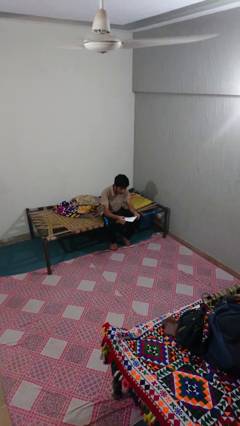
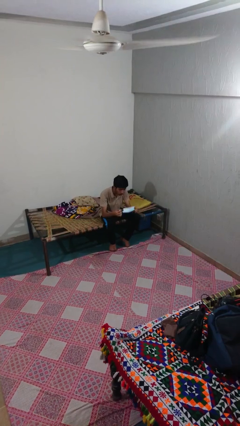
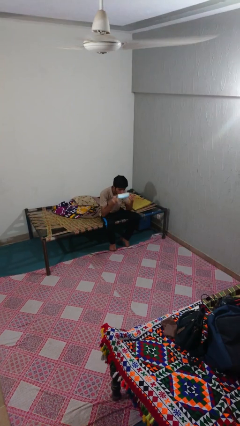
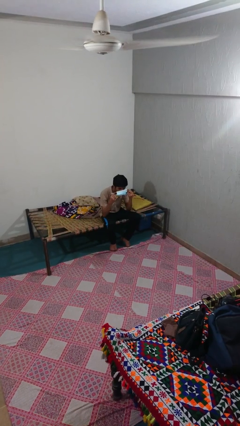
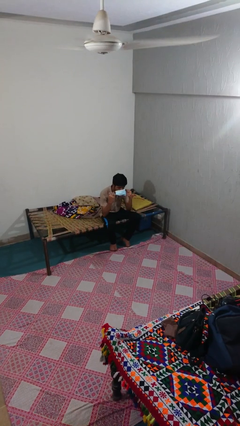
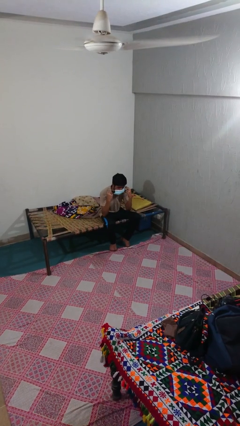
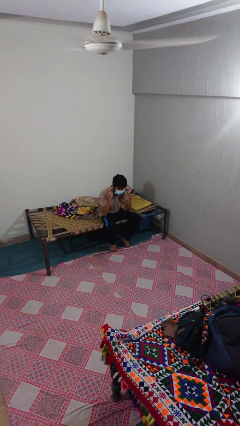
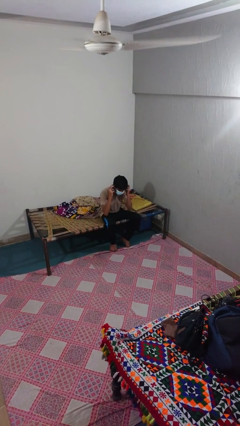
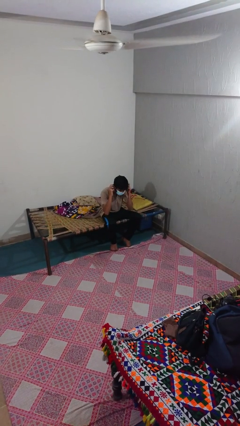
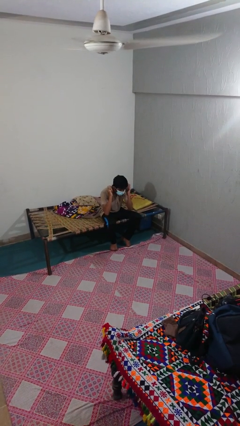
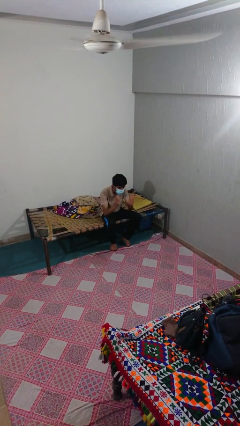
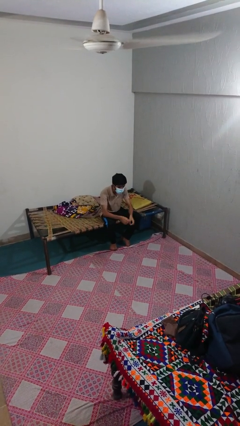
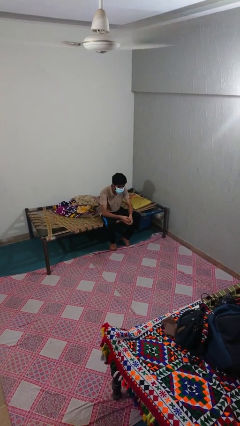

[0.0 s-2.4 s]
person puts on facemask

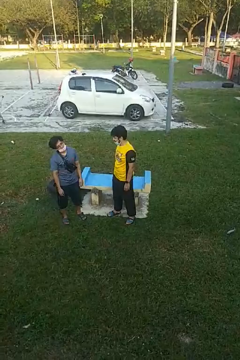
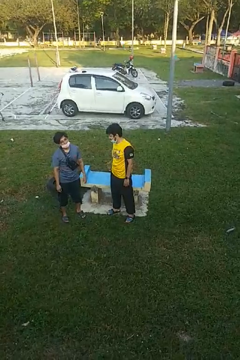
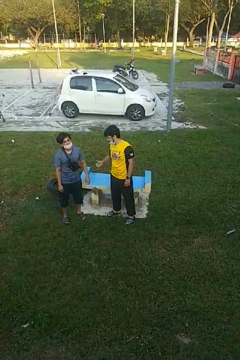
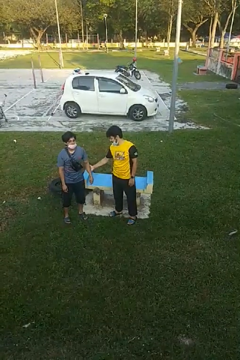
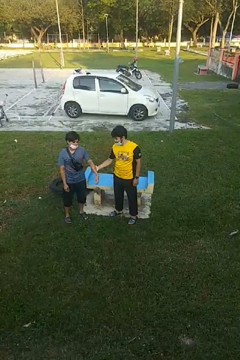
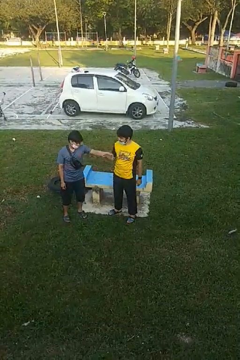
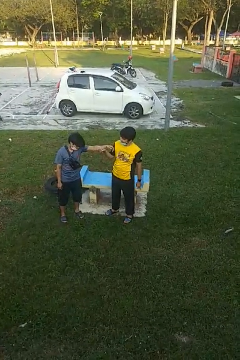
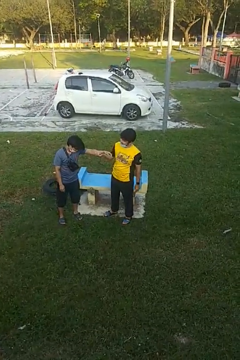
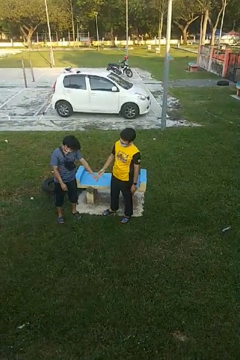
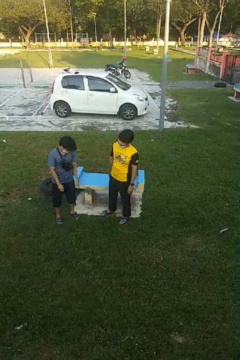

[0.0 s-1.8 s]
person grabs person by forearm

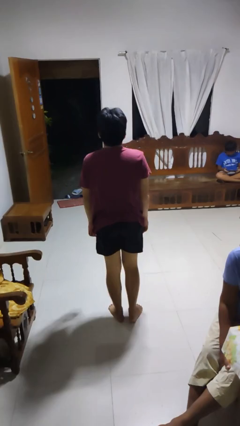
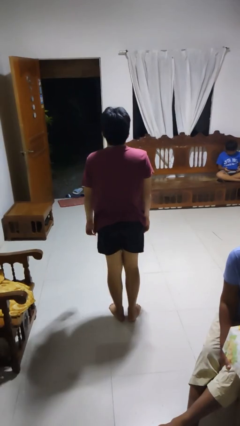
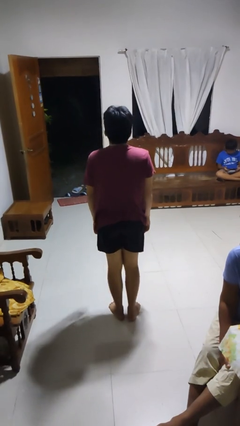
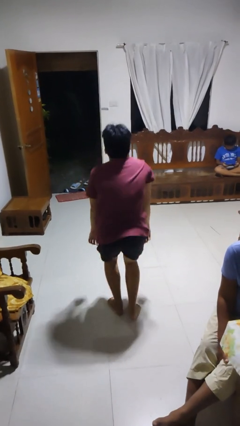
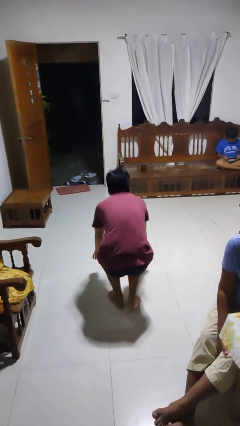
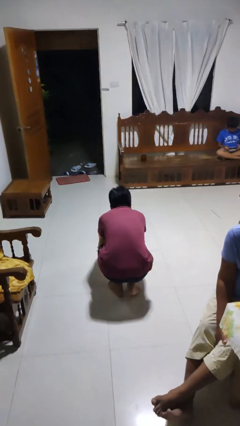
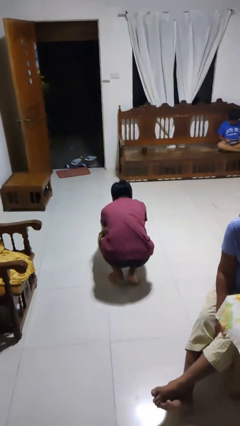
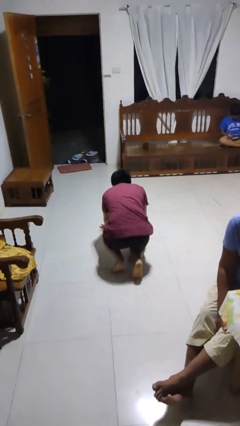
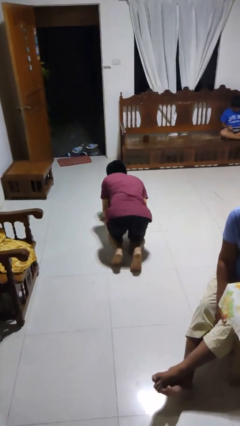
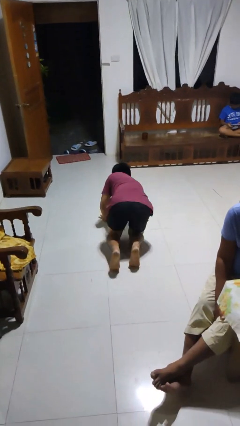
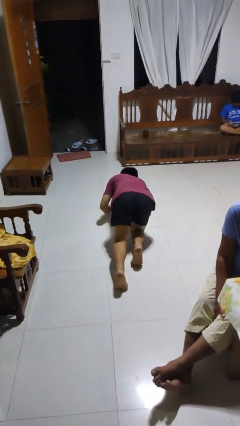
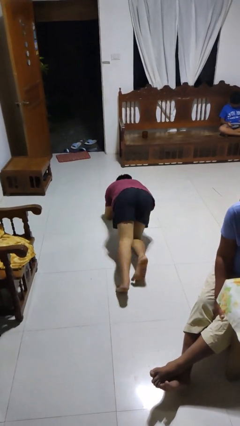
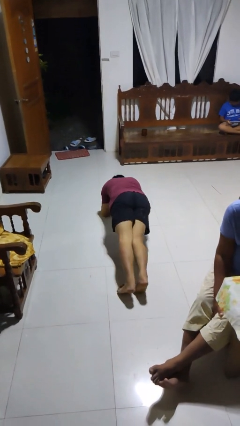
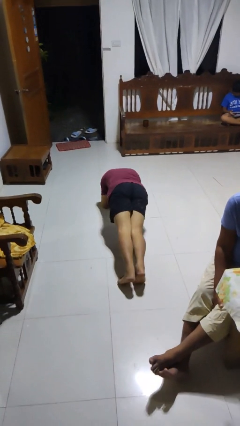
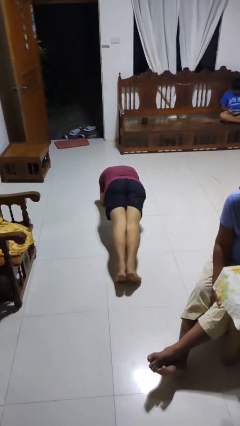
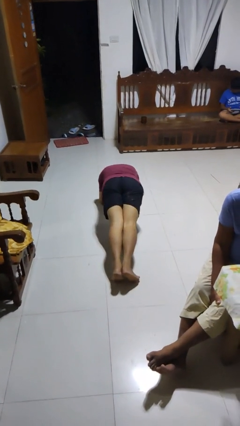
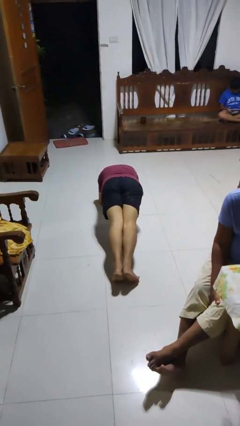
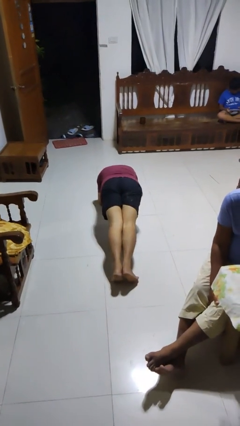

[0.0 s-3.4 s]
person exercises with plank

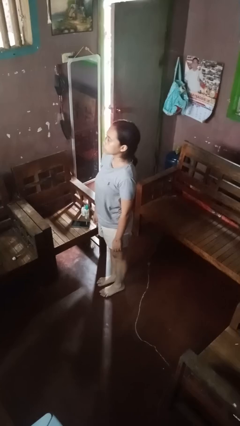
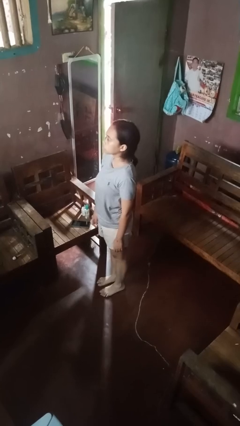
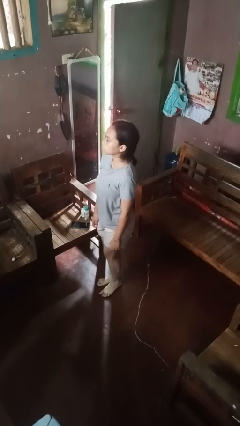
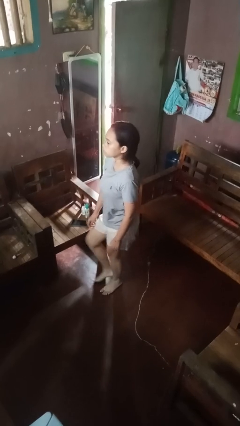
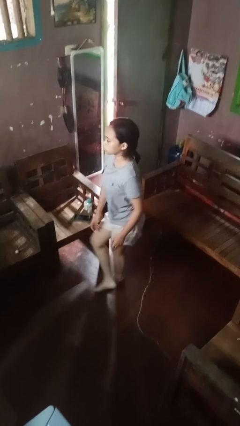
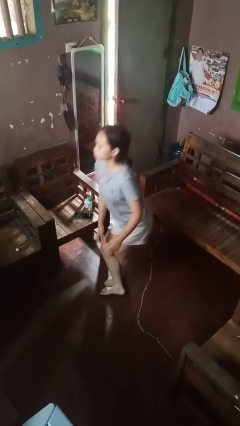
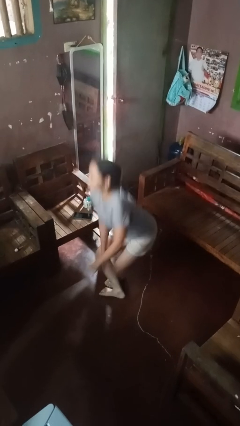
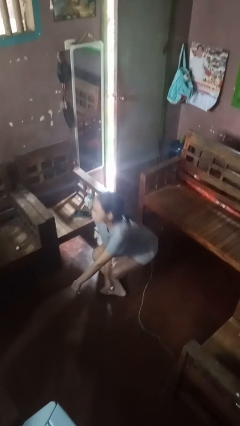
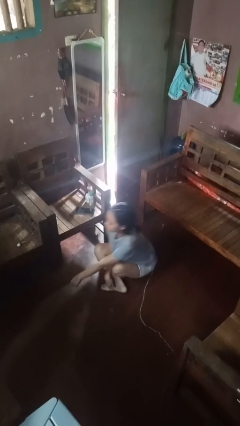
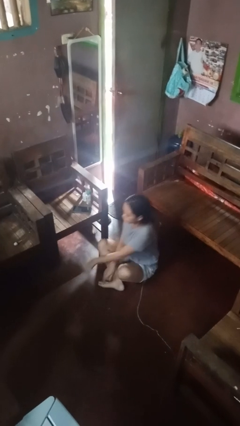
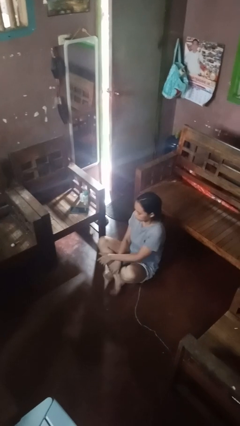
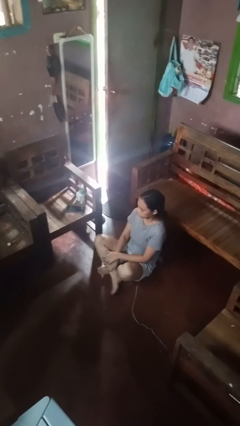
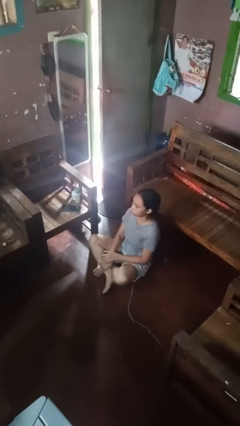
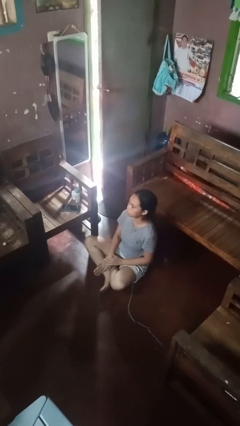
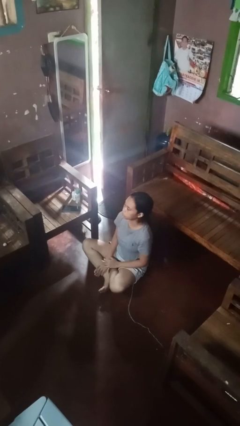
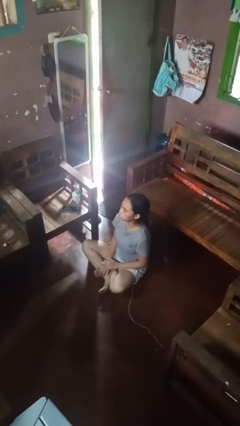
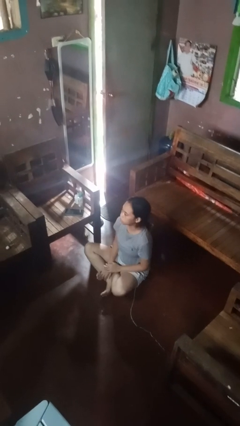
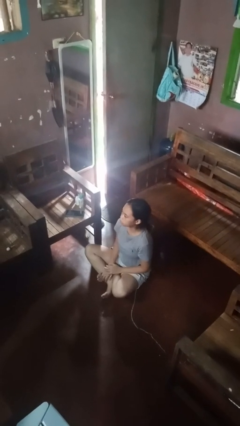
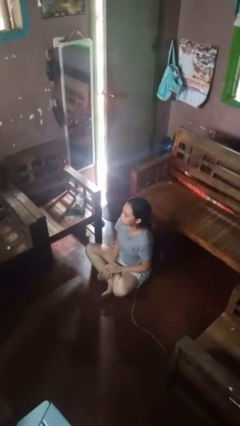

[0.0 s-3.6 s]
person sits crisscross

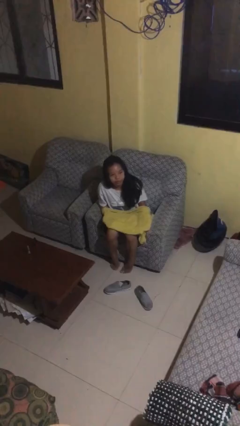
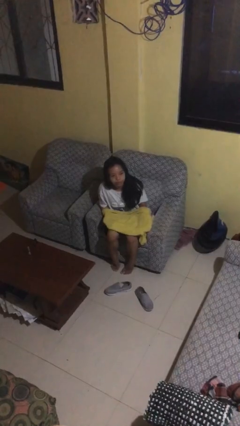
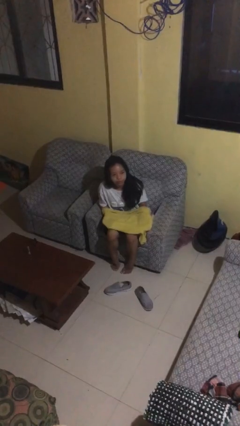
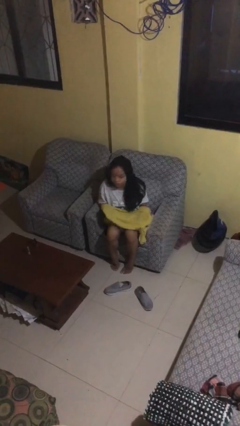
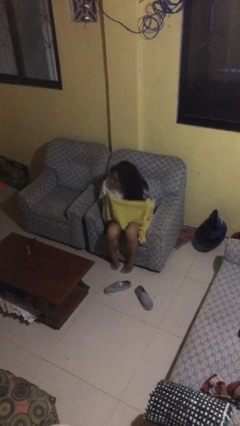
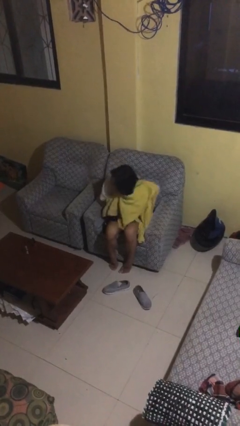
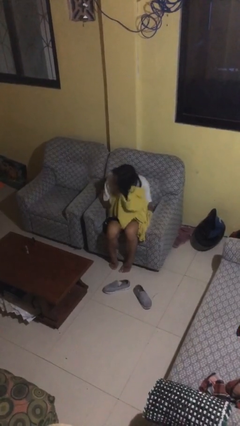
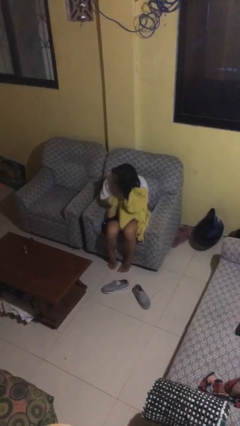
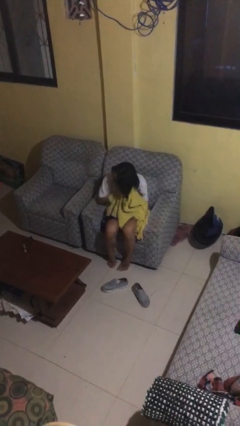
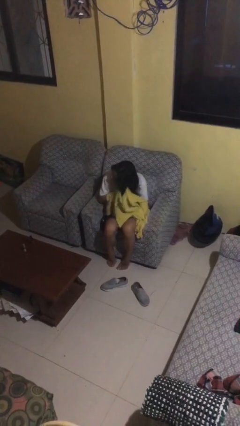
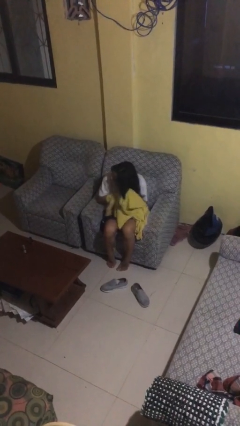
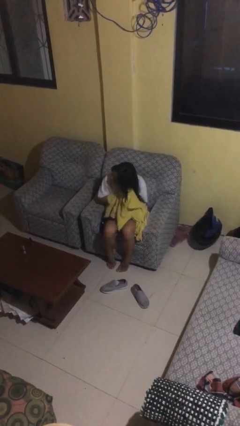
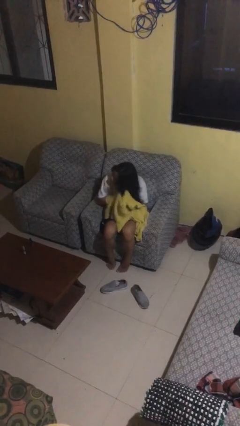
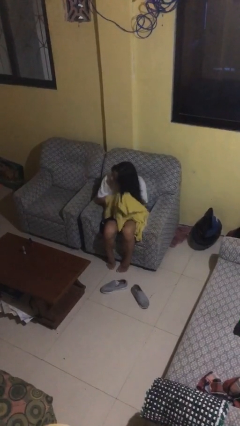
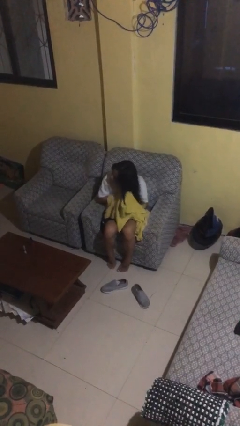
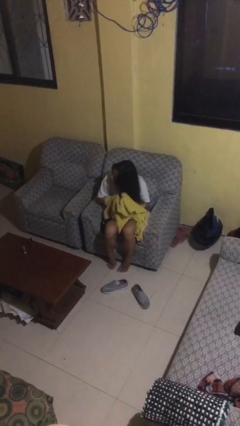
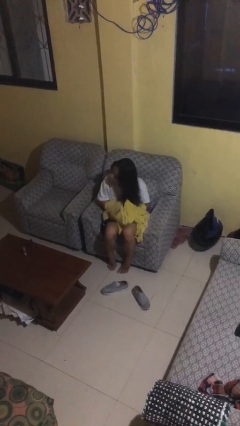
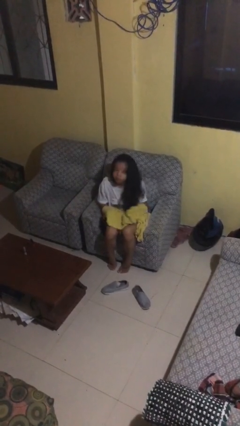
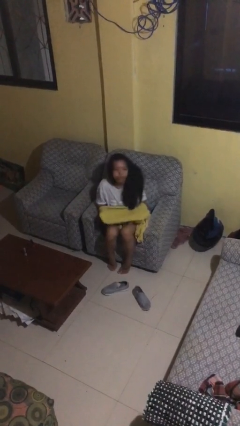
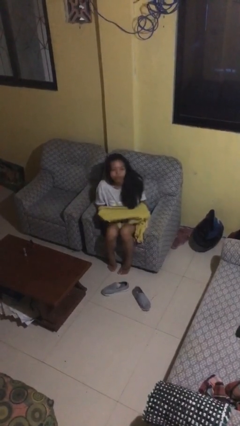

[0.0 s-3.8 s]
person dries hair with towel

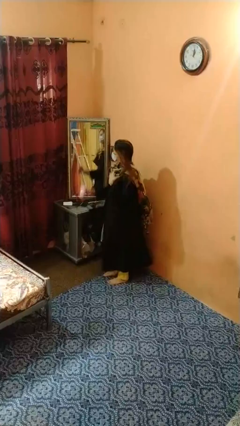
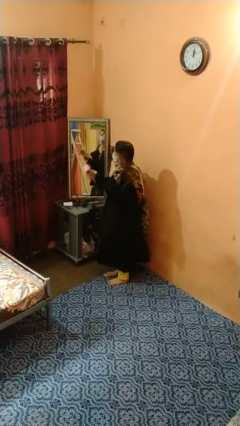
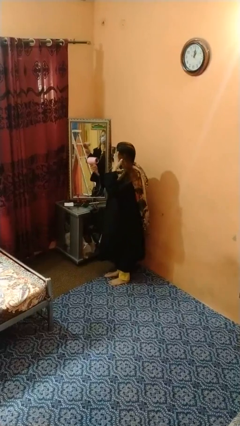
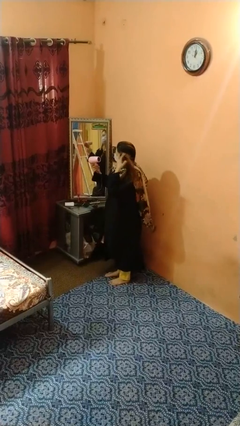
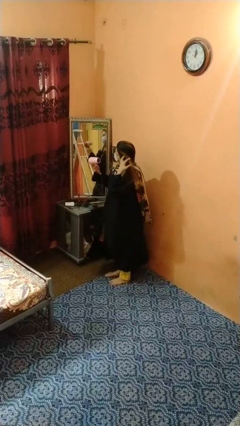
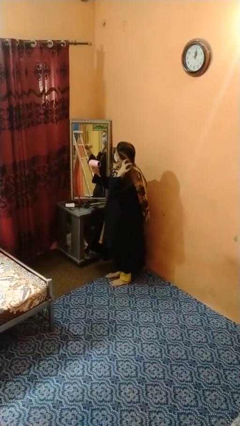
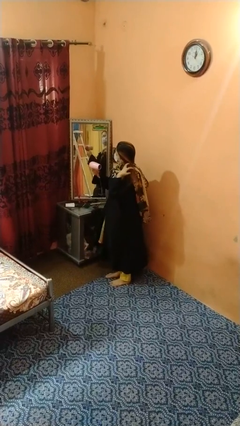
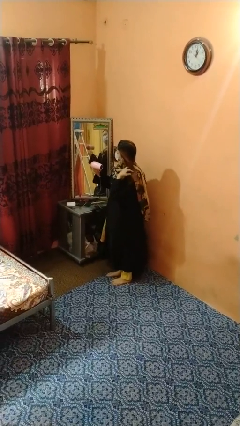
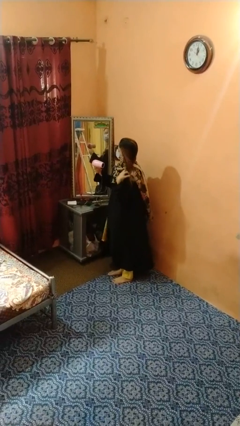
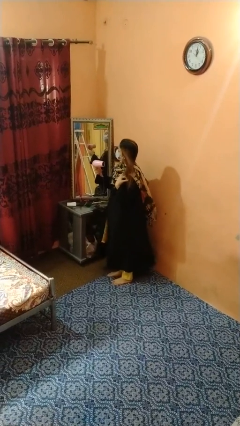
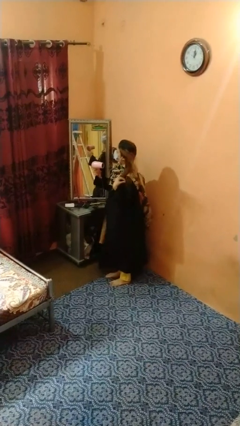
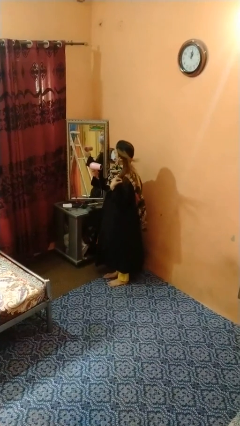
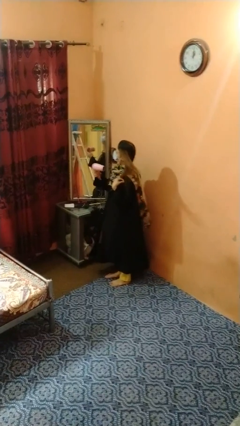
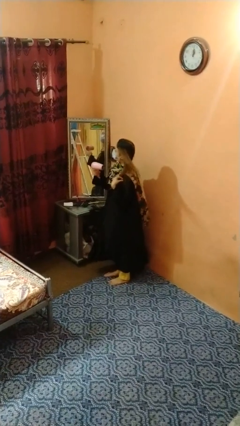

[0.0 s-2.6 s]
person dries hair with hairdryer
